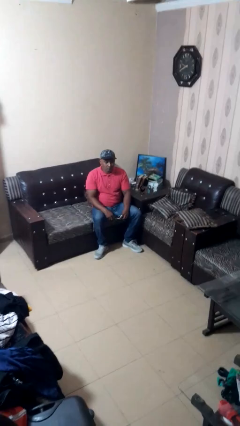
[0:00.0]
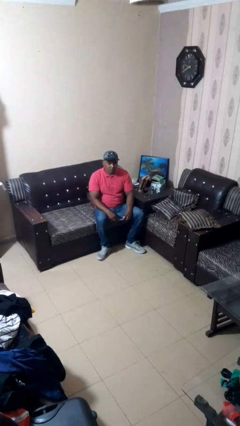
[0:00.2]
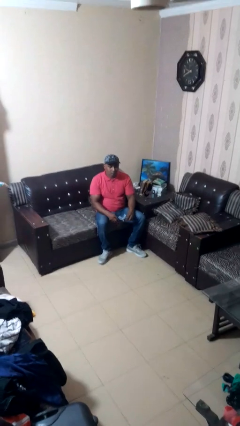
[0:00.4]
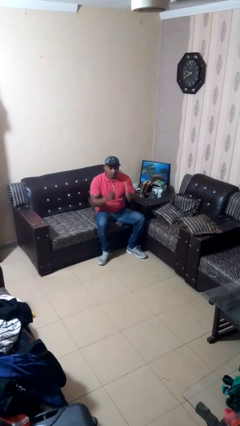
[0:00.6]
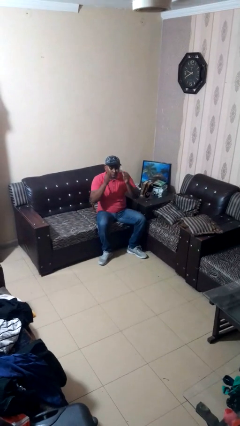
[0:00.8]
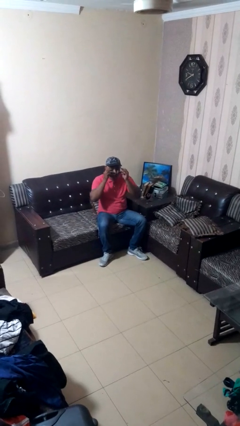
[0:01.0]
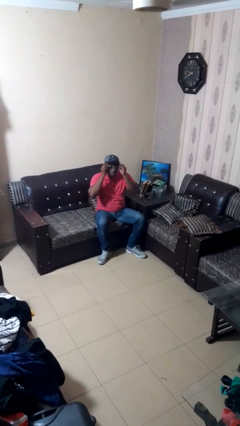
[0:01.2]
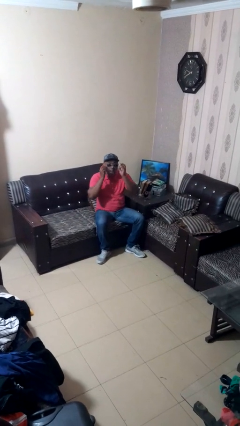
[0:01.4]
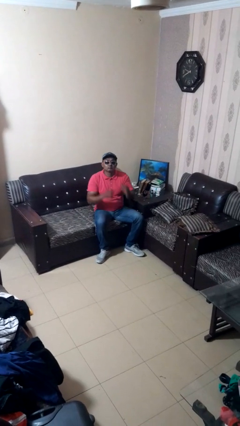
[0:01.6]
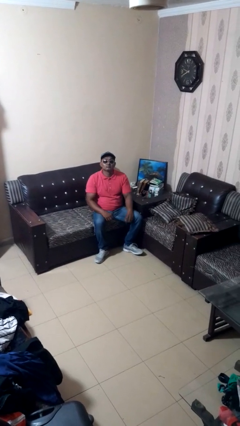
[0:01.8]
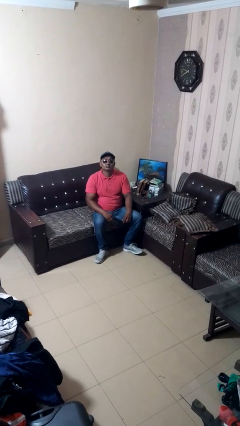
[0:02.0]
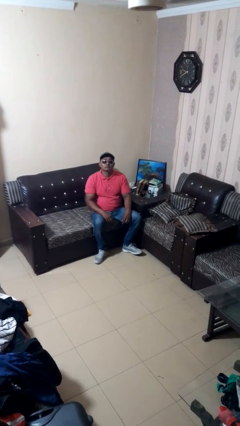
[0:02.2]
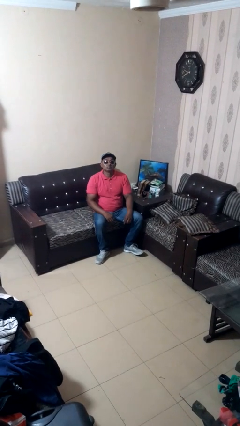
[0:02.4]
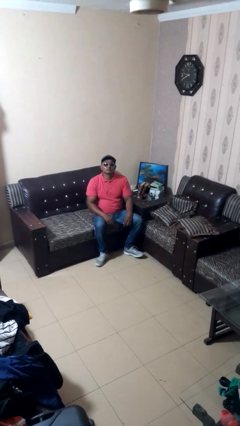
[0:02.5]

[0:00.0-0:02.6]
person puts on sunglasses

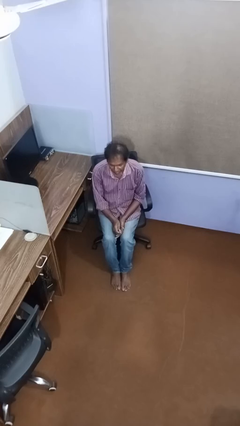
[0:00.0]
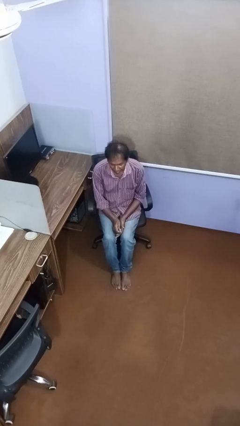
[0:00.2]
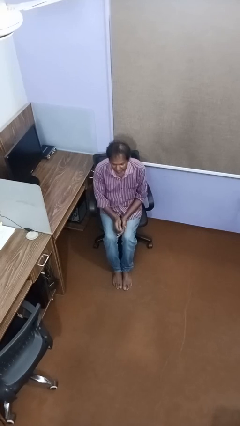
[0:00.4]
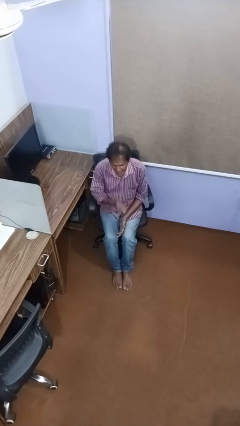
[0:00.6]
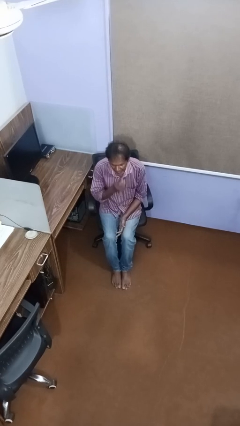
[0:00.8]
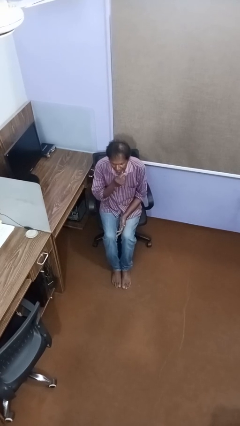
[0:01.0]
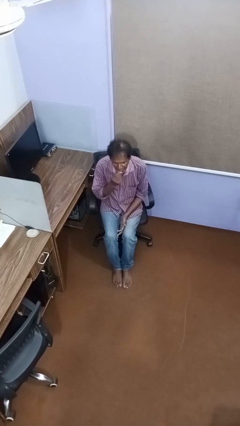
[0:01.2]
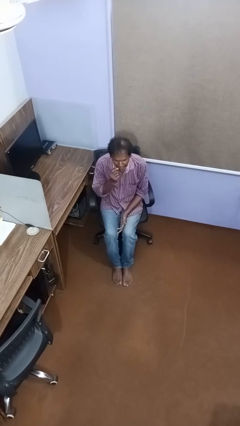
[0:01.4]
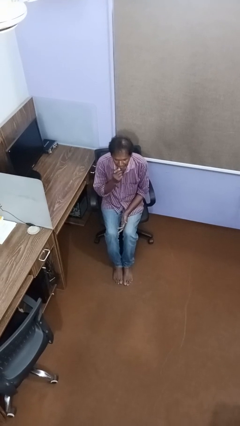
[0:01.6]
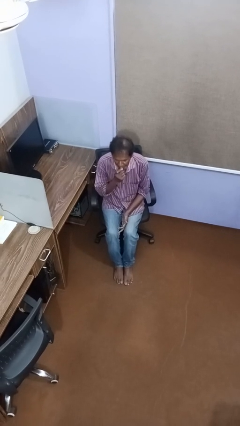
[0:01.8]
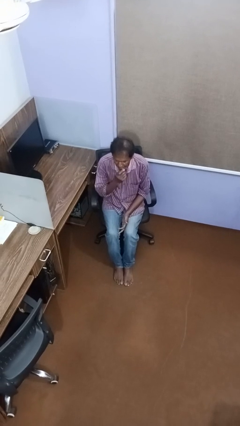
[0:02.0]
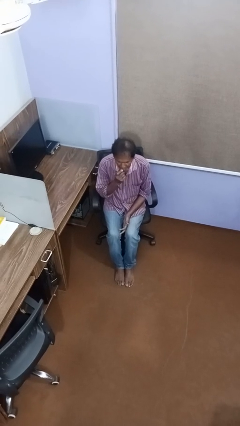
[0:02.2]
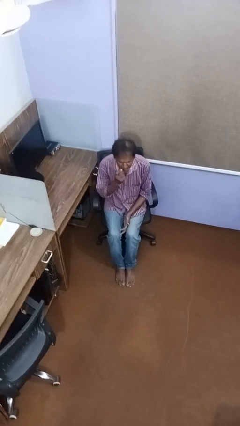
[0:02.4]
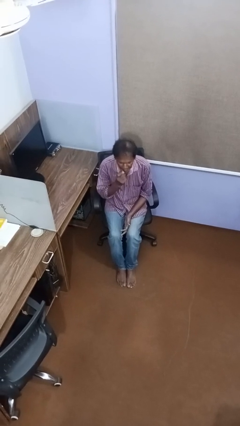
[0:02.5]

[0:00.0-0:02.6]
person applies lip makeup

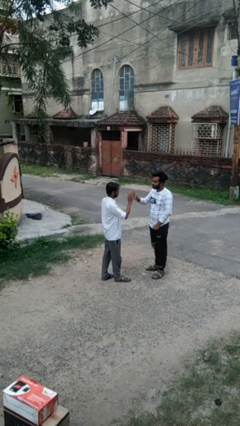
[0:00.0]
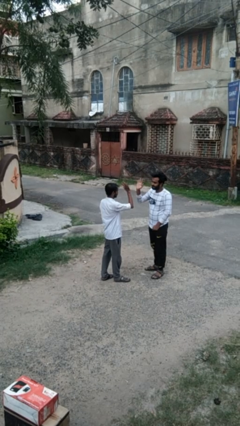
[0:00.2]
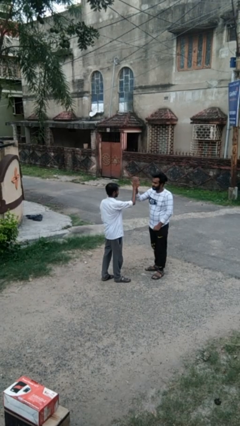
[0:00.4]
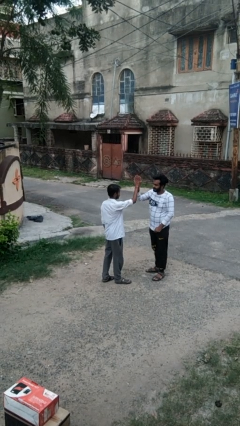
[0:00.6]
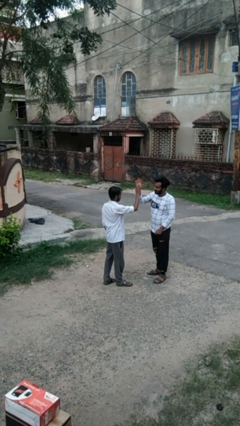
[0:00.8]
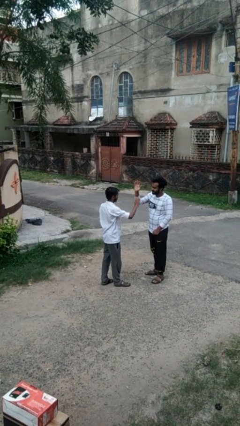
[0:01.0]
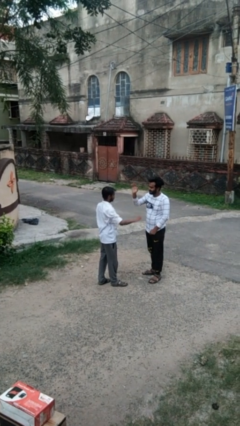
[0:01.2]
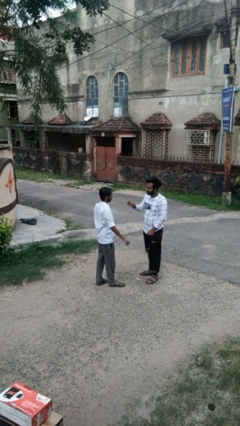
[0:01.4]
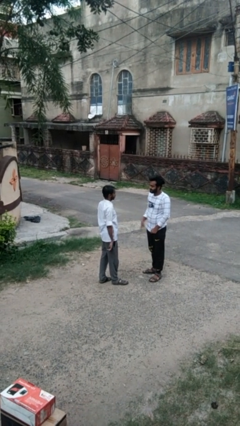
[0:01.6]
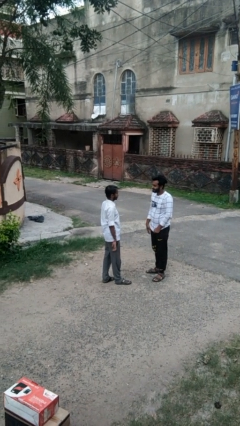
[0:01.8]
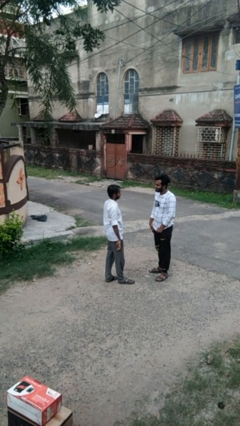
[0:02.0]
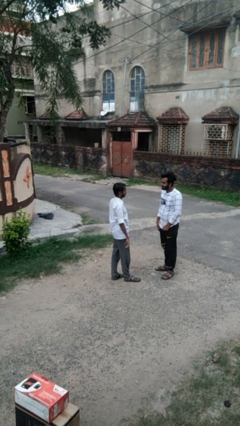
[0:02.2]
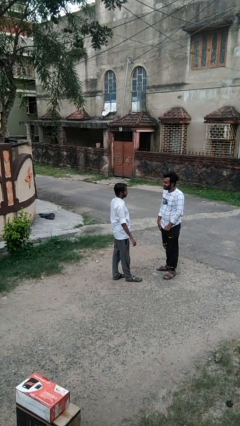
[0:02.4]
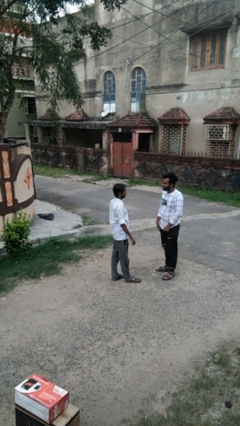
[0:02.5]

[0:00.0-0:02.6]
person highfives hand

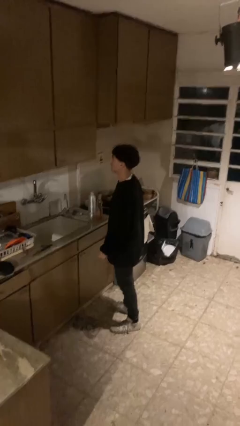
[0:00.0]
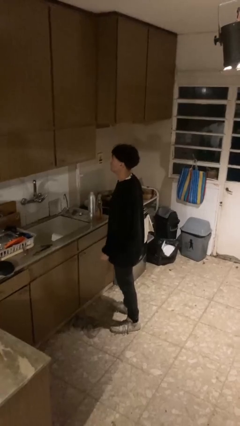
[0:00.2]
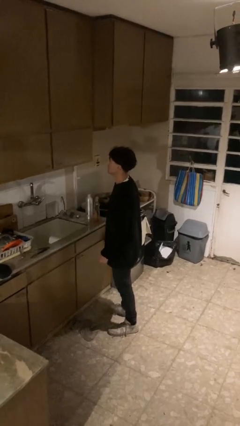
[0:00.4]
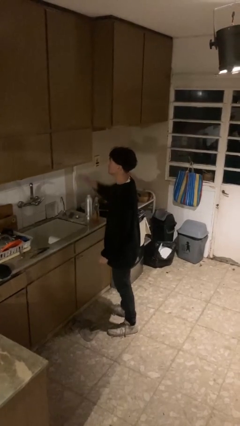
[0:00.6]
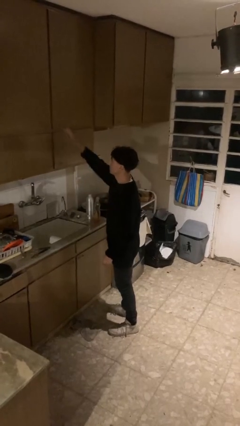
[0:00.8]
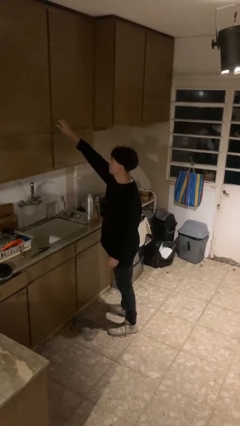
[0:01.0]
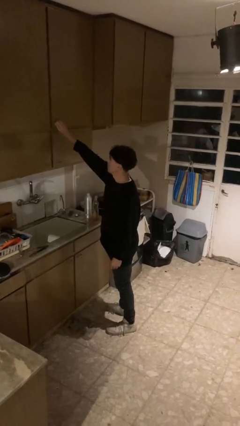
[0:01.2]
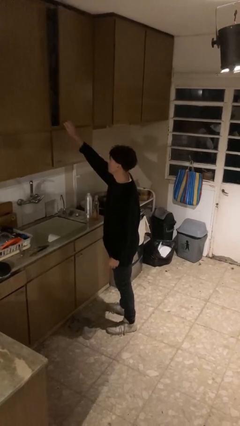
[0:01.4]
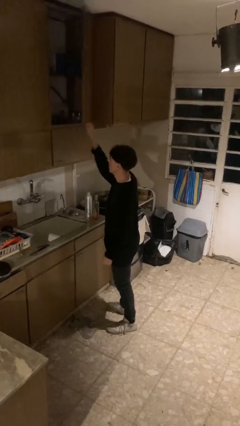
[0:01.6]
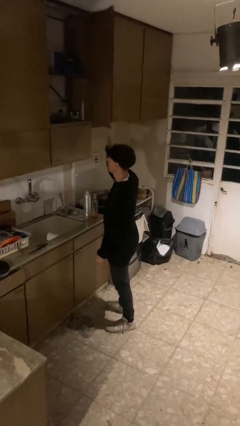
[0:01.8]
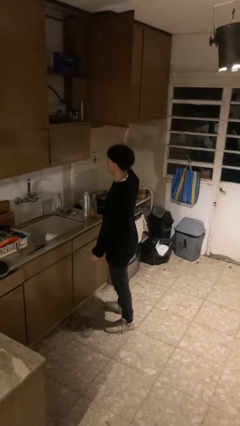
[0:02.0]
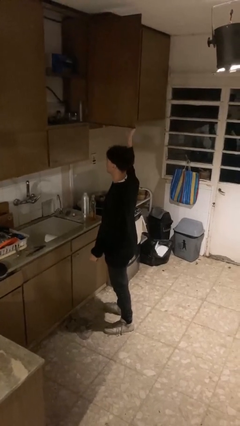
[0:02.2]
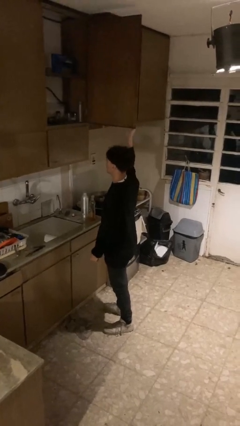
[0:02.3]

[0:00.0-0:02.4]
person closes cabinet

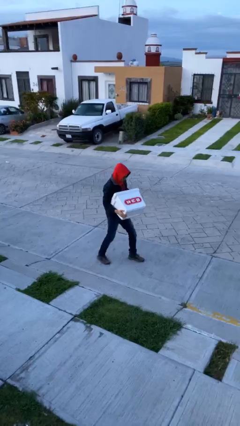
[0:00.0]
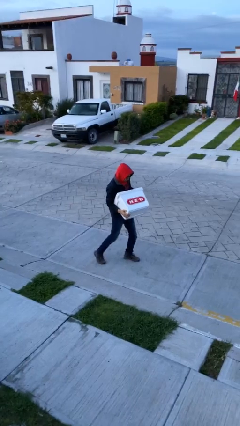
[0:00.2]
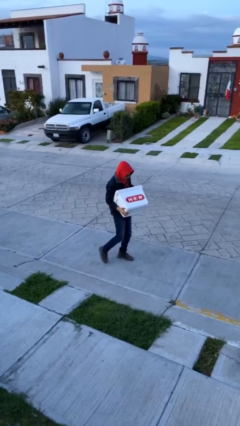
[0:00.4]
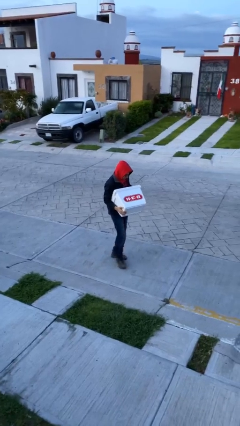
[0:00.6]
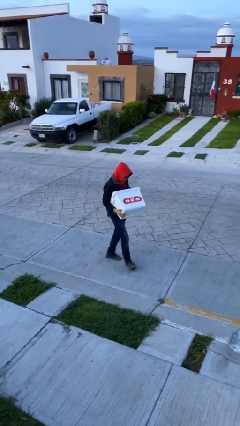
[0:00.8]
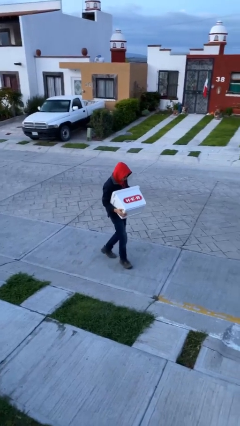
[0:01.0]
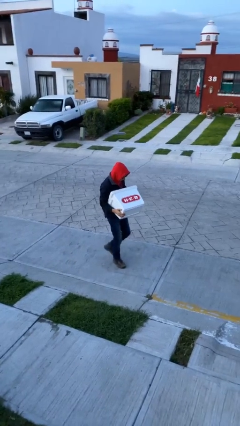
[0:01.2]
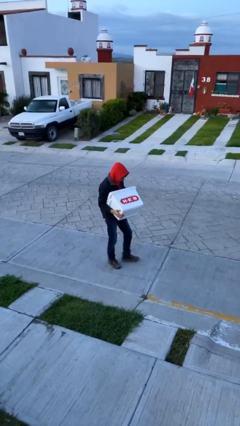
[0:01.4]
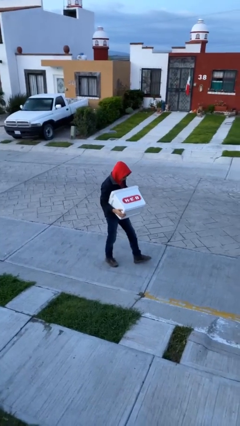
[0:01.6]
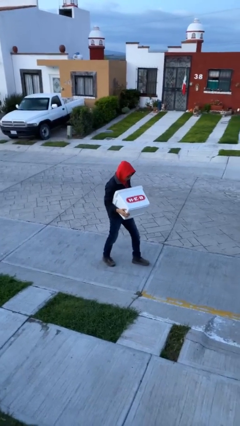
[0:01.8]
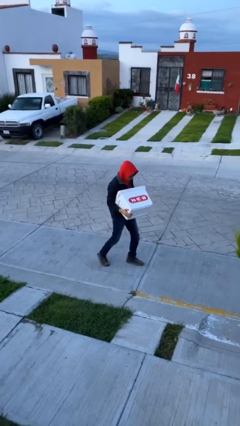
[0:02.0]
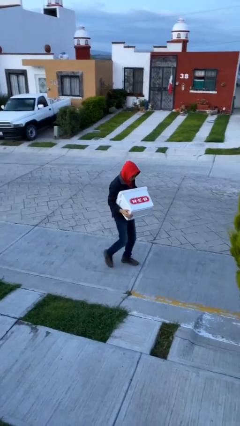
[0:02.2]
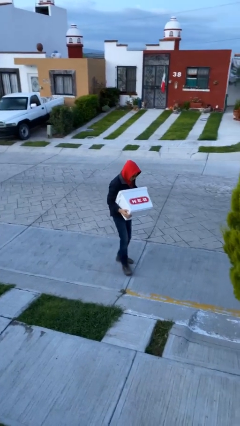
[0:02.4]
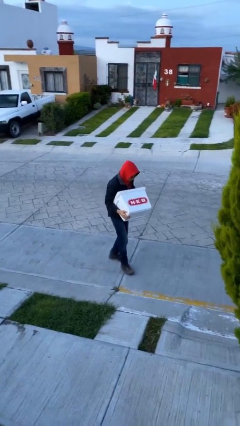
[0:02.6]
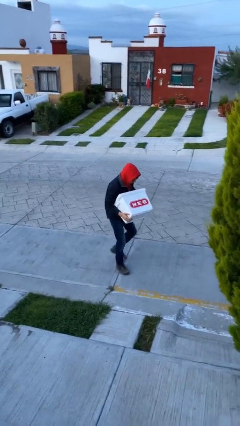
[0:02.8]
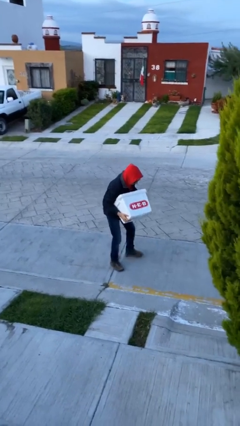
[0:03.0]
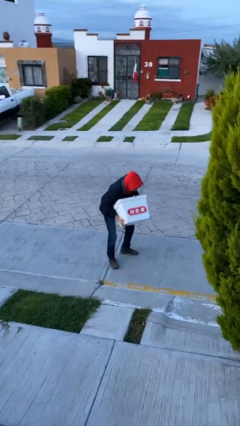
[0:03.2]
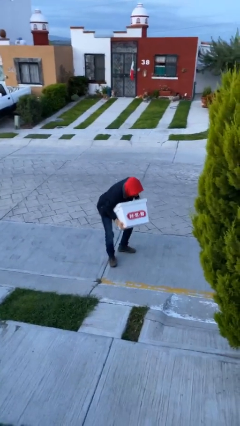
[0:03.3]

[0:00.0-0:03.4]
person carries heavy object

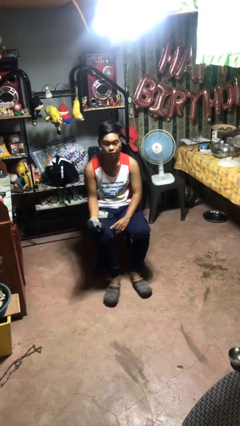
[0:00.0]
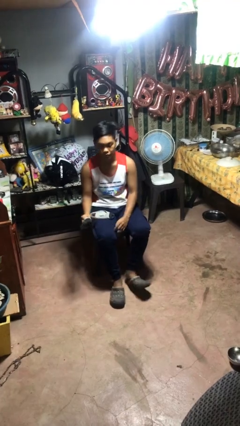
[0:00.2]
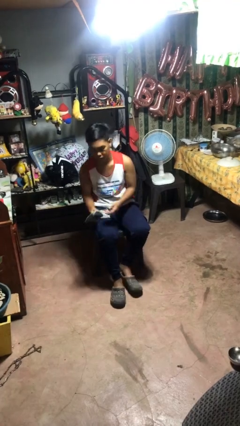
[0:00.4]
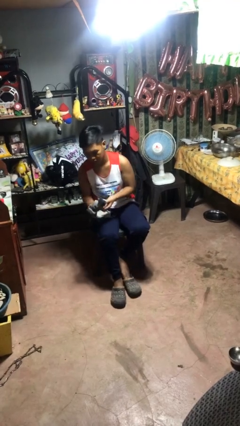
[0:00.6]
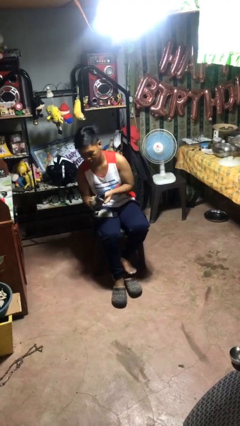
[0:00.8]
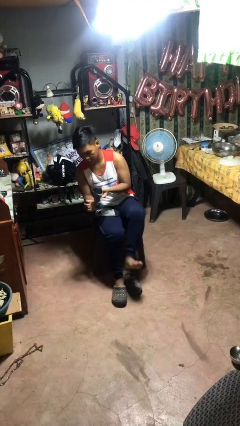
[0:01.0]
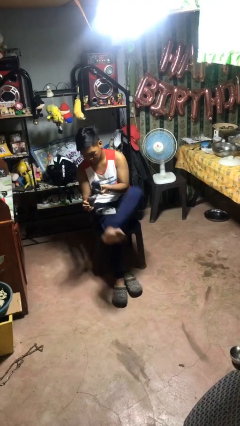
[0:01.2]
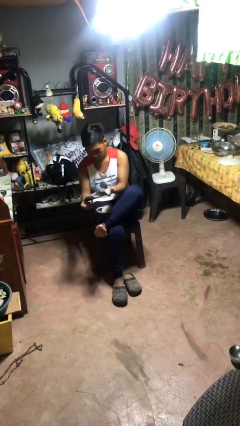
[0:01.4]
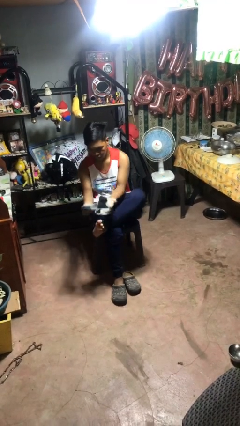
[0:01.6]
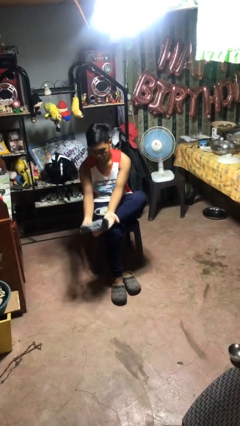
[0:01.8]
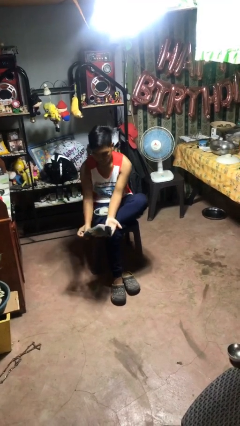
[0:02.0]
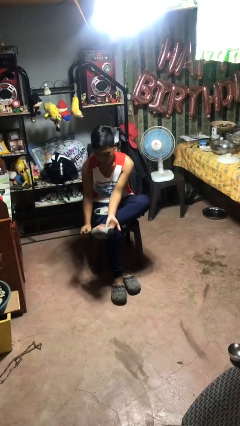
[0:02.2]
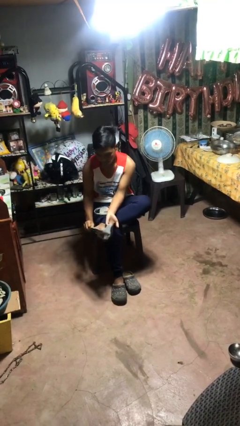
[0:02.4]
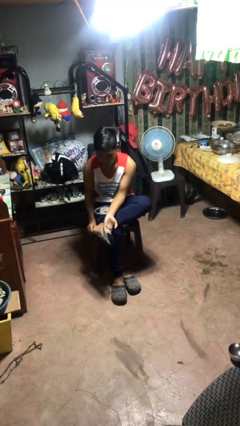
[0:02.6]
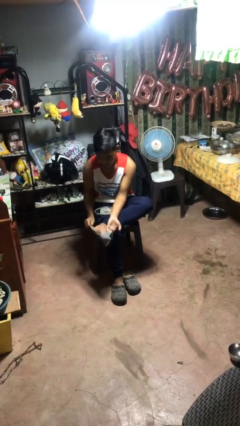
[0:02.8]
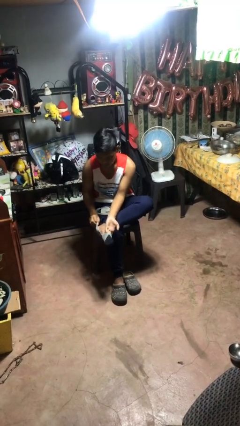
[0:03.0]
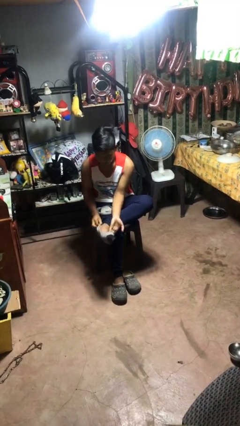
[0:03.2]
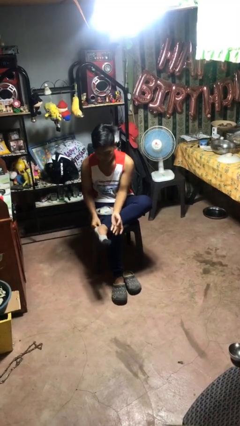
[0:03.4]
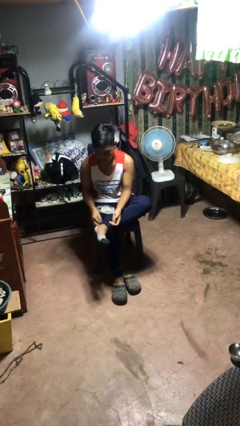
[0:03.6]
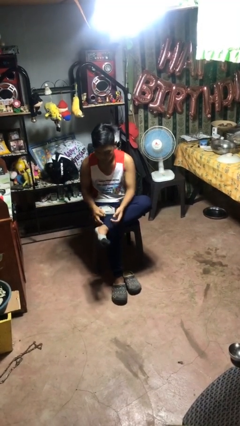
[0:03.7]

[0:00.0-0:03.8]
person puts on socks
